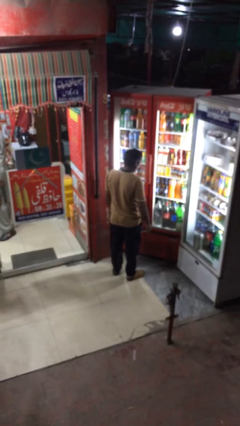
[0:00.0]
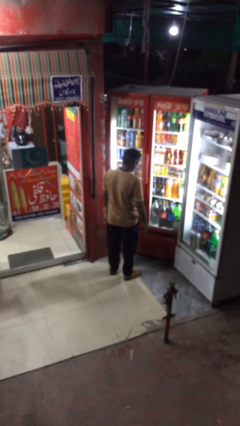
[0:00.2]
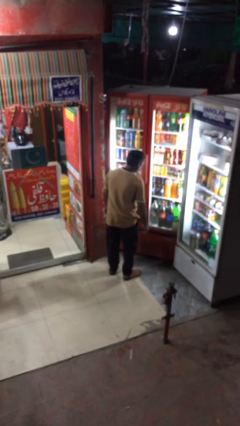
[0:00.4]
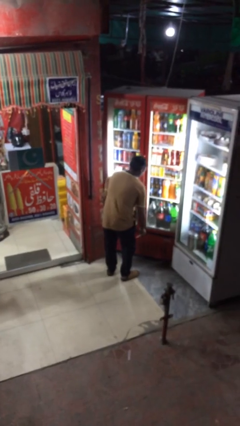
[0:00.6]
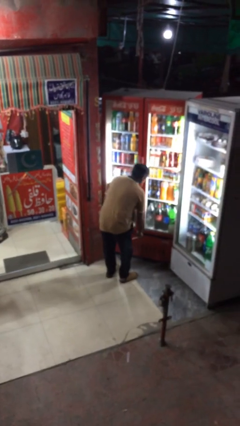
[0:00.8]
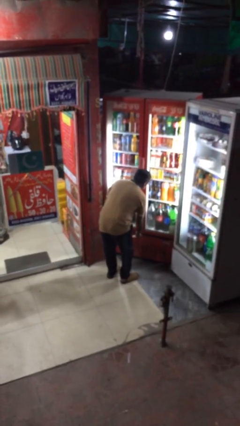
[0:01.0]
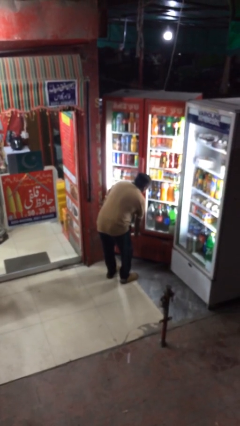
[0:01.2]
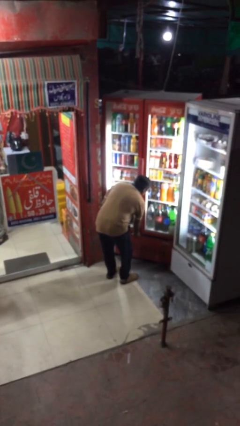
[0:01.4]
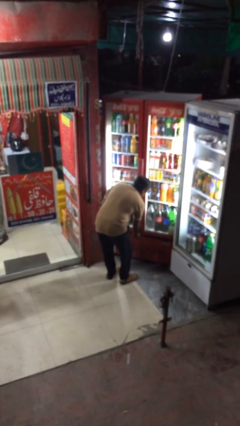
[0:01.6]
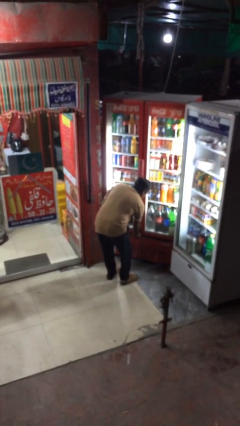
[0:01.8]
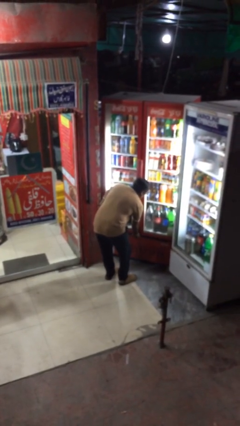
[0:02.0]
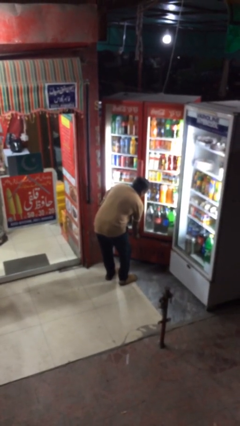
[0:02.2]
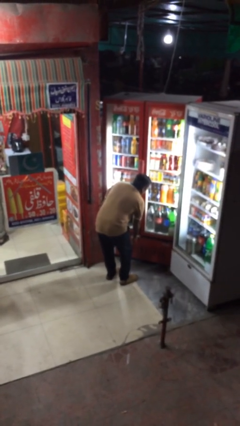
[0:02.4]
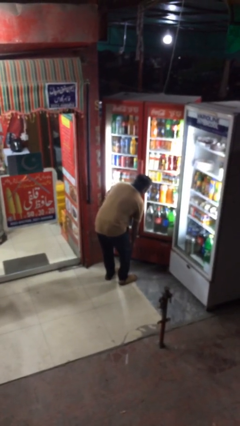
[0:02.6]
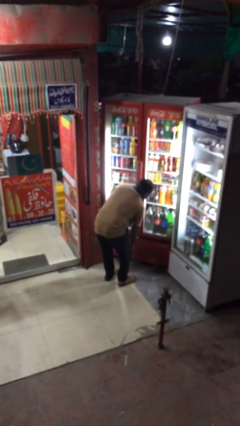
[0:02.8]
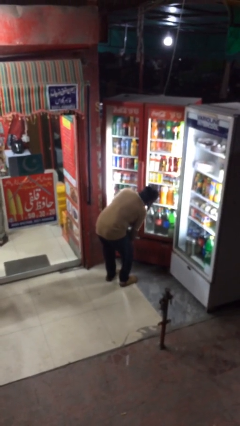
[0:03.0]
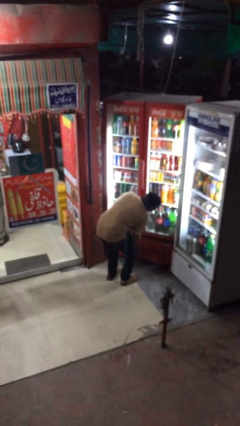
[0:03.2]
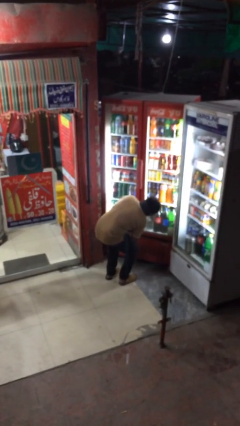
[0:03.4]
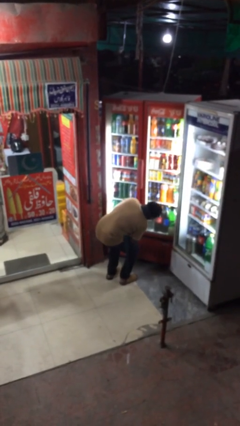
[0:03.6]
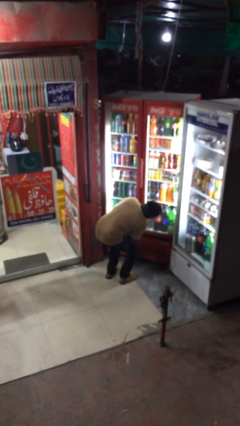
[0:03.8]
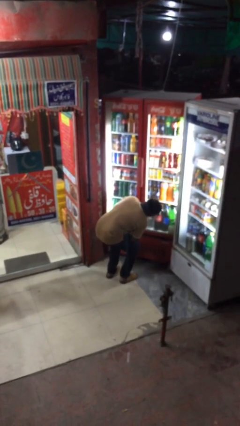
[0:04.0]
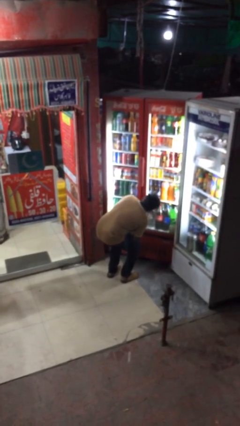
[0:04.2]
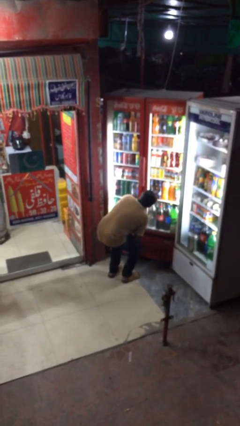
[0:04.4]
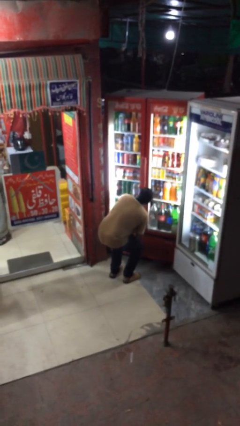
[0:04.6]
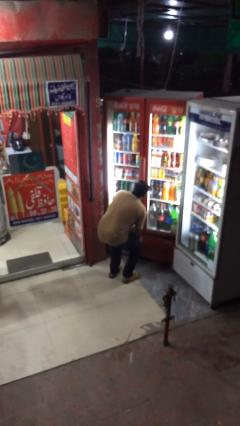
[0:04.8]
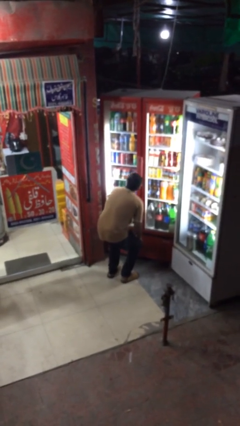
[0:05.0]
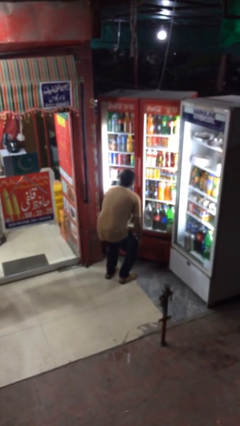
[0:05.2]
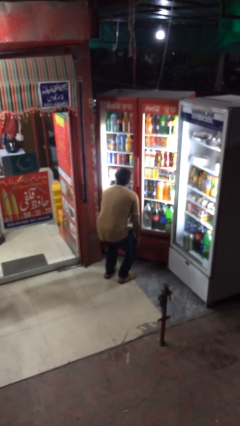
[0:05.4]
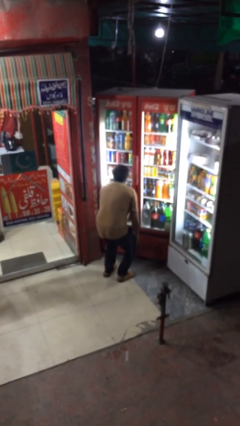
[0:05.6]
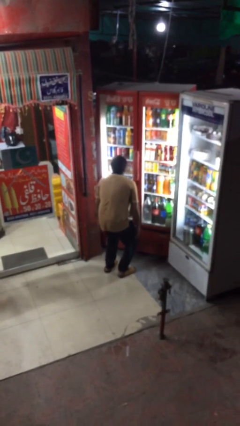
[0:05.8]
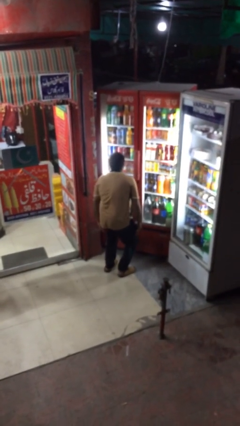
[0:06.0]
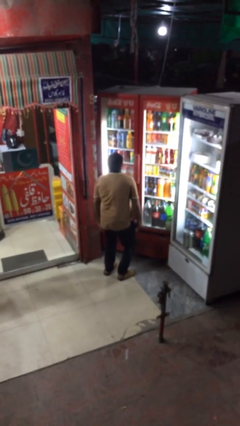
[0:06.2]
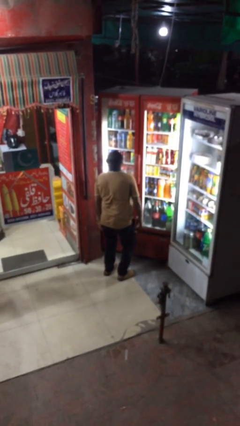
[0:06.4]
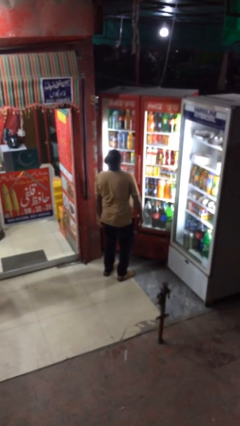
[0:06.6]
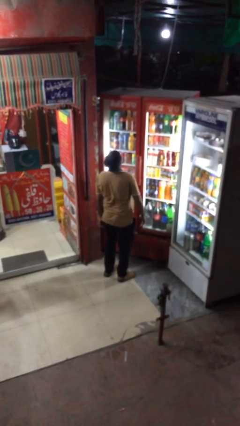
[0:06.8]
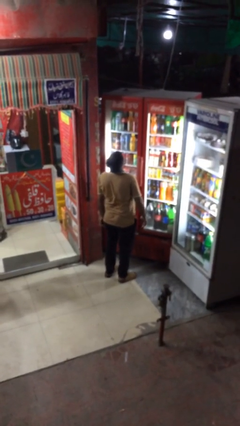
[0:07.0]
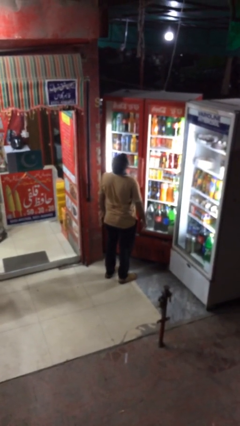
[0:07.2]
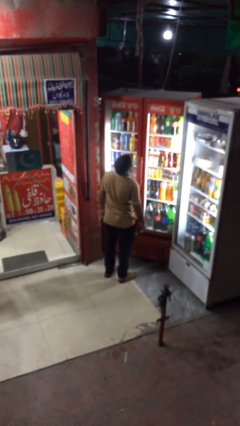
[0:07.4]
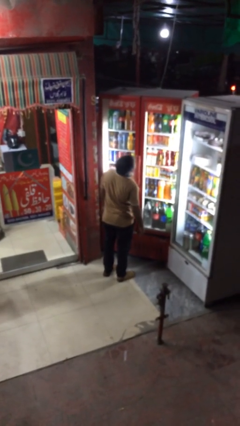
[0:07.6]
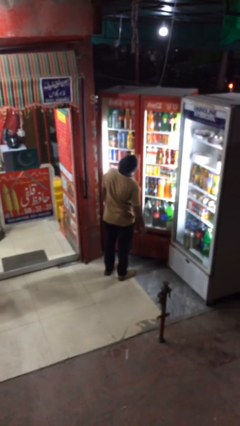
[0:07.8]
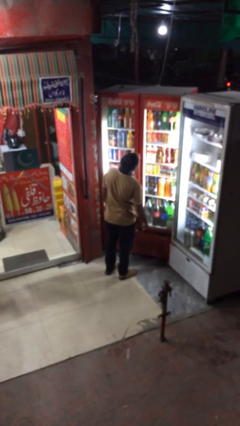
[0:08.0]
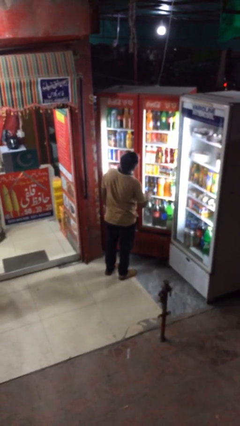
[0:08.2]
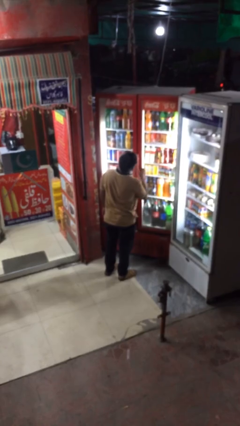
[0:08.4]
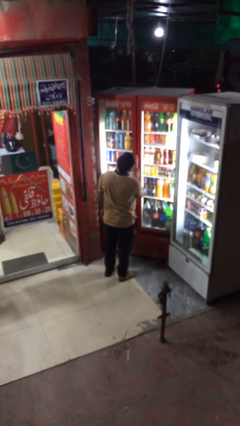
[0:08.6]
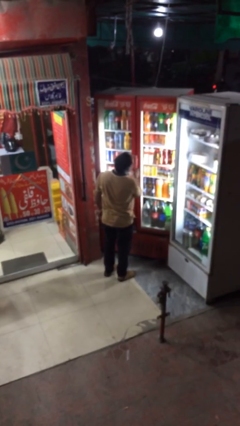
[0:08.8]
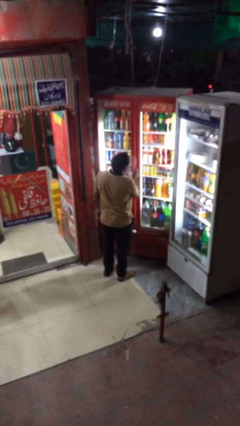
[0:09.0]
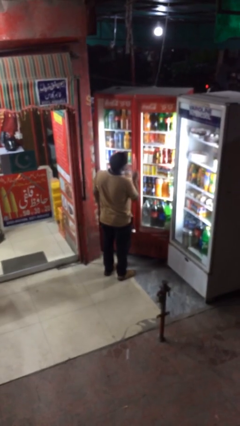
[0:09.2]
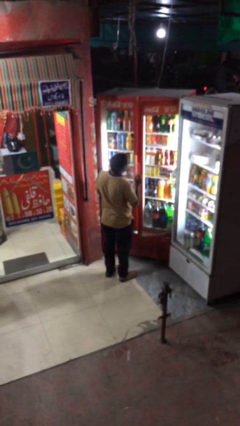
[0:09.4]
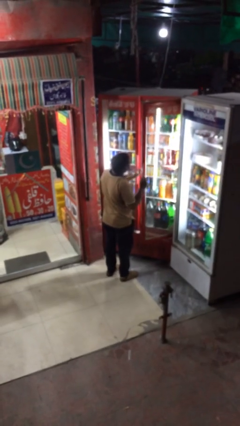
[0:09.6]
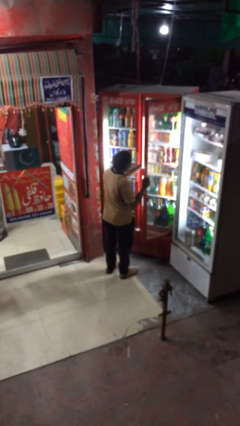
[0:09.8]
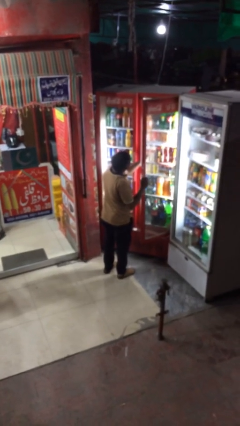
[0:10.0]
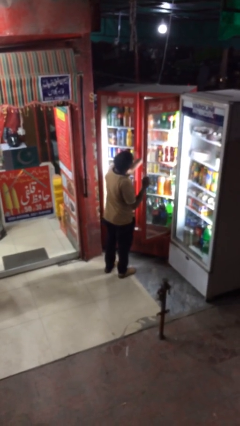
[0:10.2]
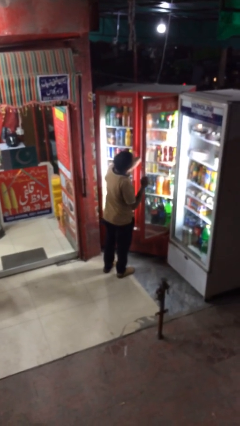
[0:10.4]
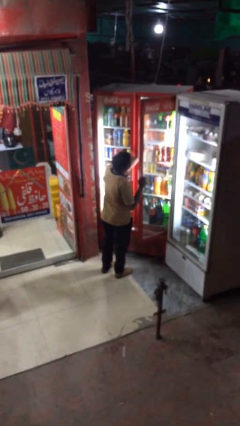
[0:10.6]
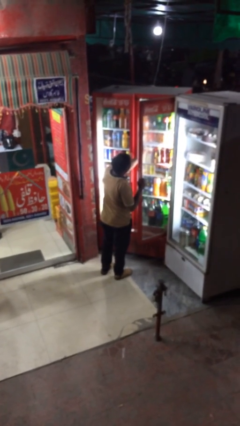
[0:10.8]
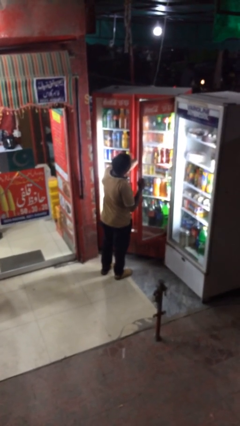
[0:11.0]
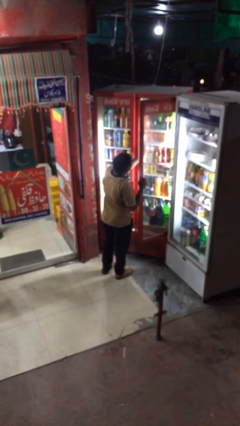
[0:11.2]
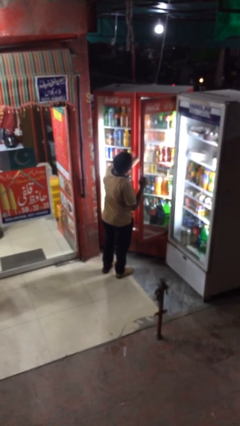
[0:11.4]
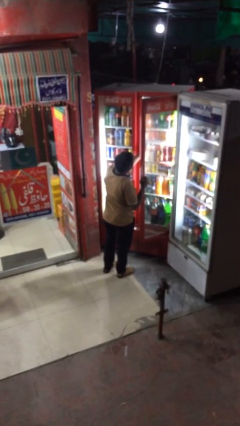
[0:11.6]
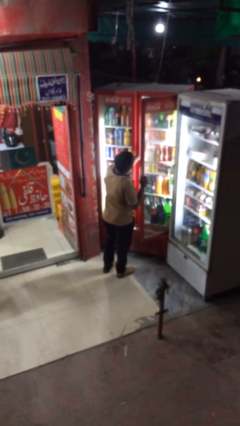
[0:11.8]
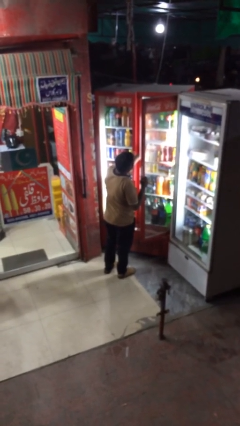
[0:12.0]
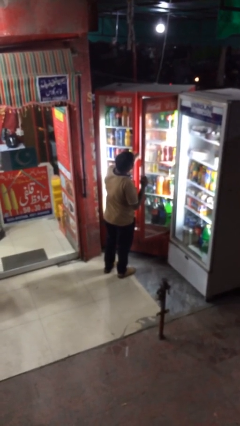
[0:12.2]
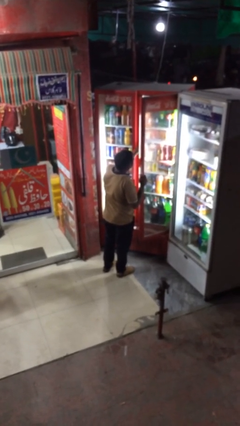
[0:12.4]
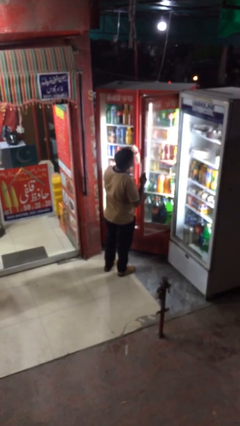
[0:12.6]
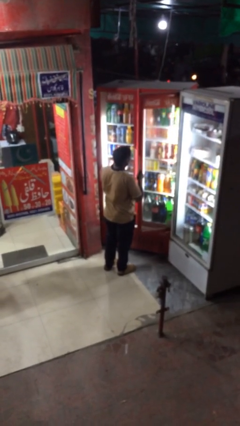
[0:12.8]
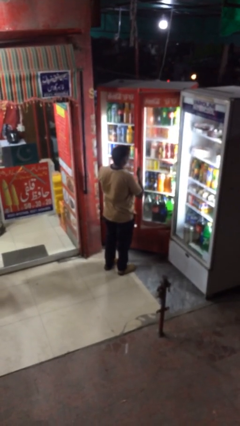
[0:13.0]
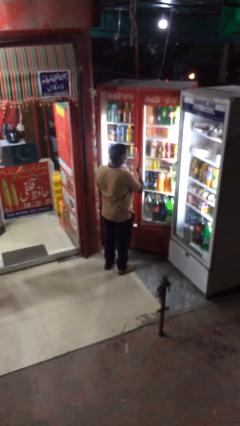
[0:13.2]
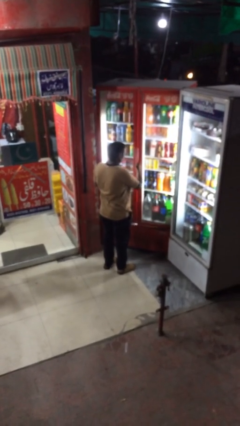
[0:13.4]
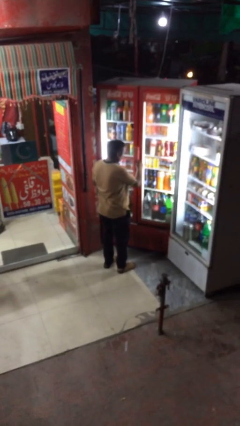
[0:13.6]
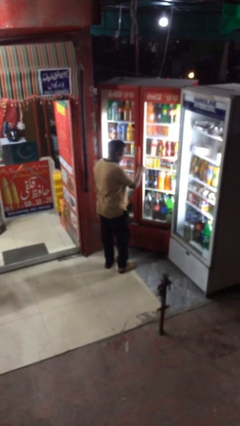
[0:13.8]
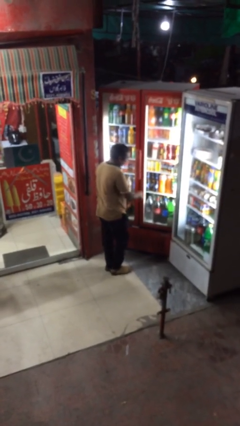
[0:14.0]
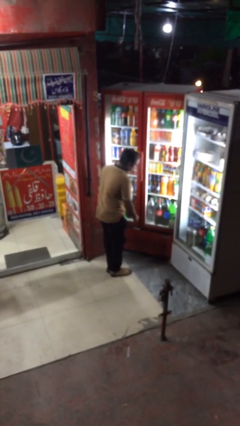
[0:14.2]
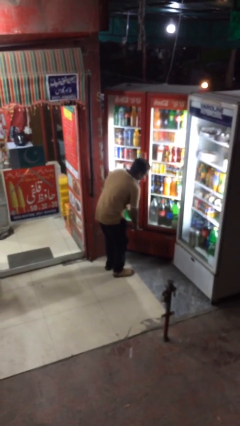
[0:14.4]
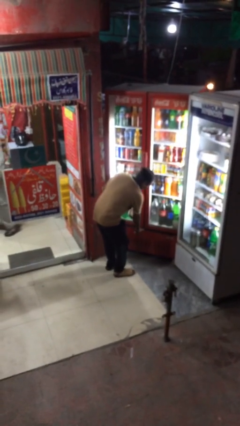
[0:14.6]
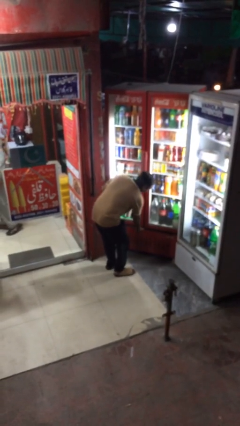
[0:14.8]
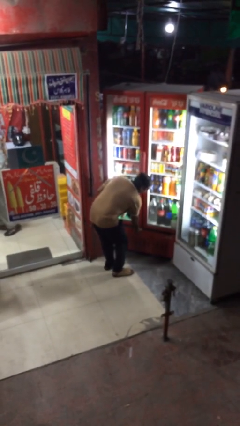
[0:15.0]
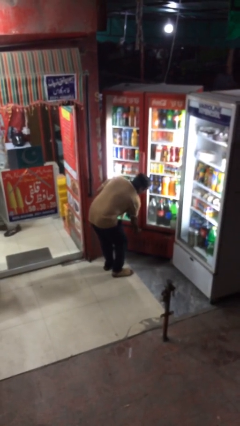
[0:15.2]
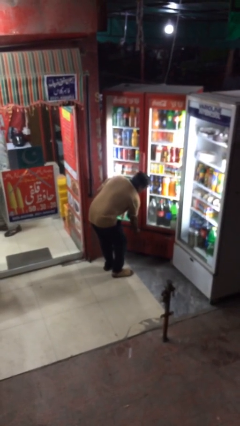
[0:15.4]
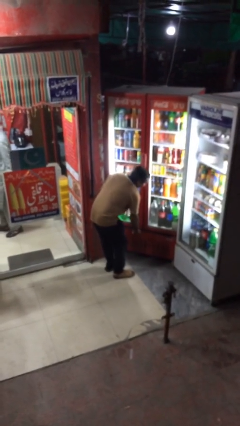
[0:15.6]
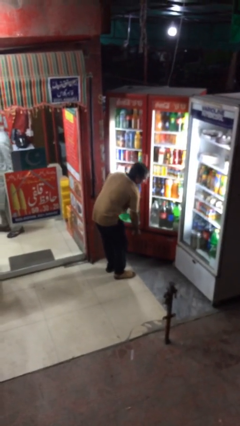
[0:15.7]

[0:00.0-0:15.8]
person purchases from machine

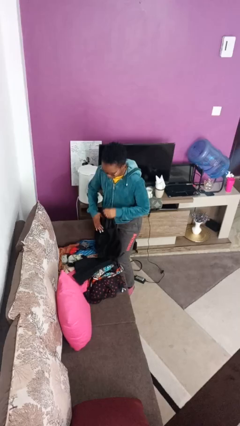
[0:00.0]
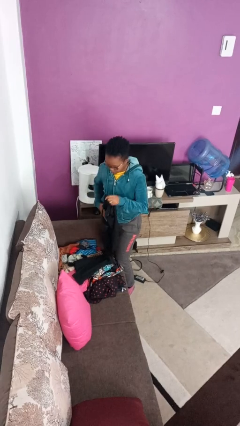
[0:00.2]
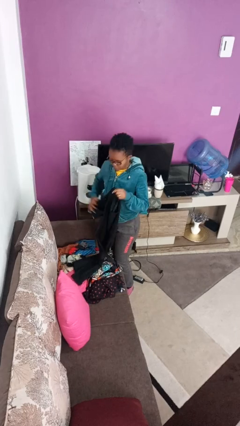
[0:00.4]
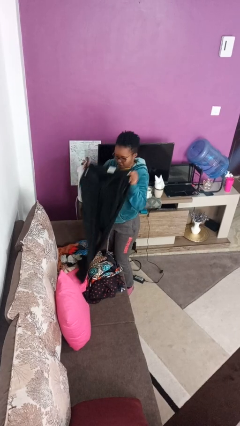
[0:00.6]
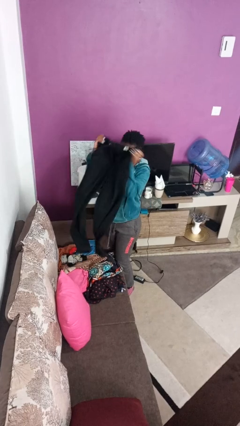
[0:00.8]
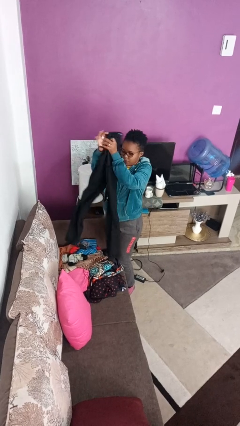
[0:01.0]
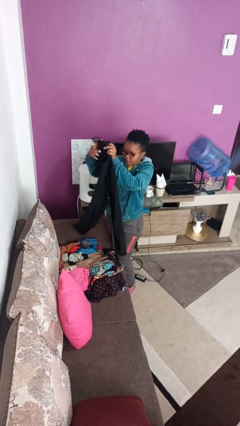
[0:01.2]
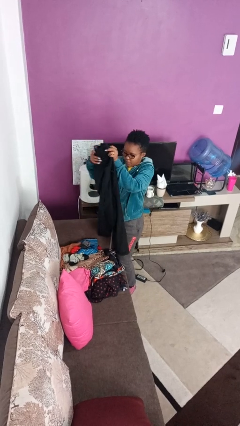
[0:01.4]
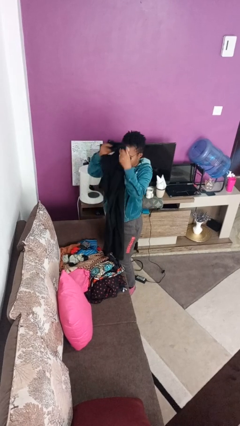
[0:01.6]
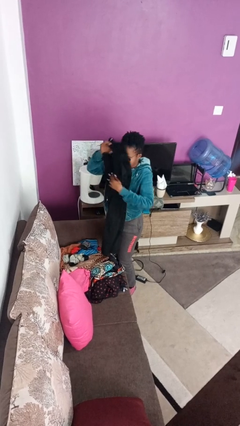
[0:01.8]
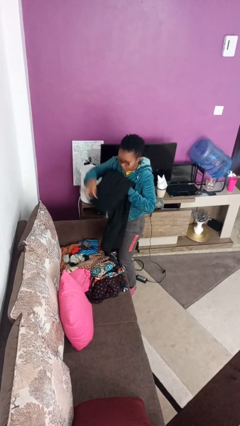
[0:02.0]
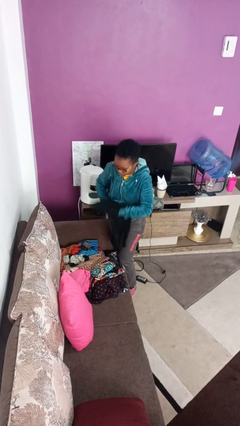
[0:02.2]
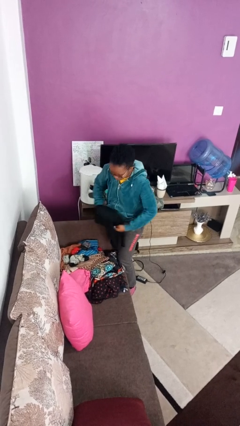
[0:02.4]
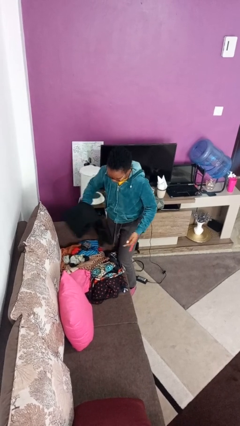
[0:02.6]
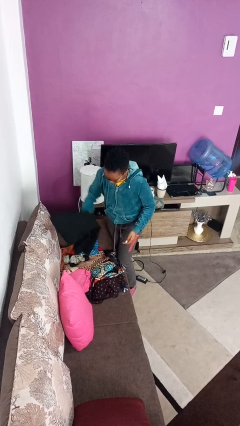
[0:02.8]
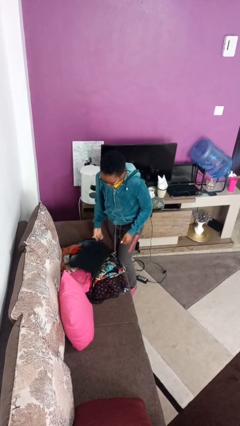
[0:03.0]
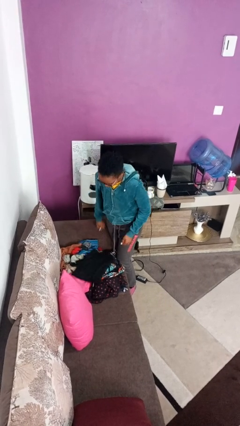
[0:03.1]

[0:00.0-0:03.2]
person folds pants
